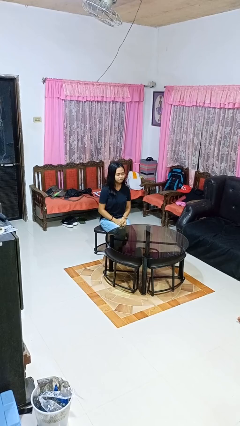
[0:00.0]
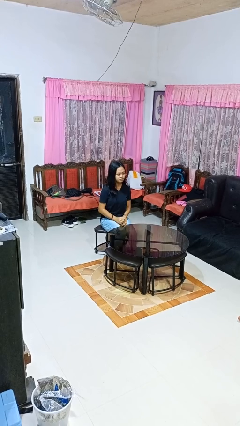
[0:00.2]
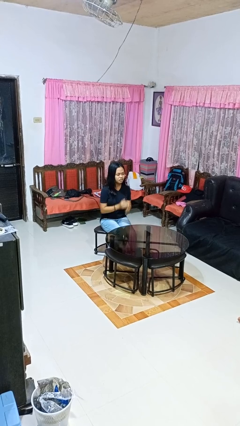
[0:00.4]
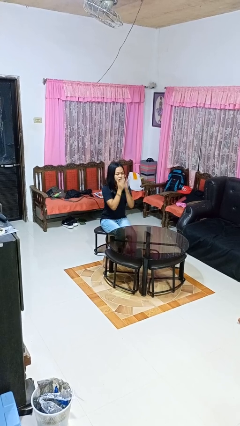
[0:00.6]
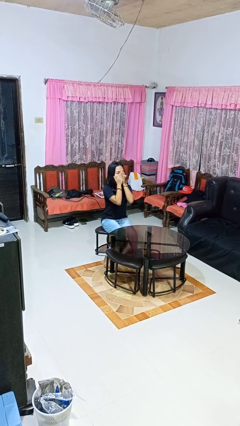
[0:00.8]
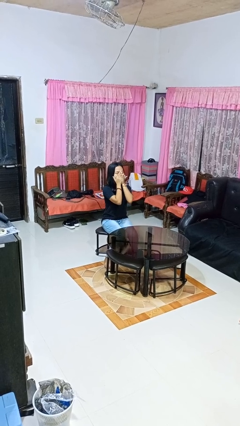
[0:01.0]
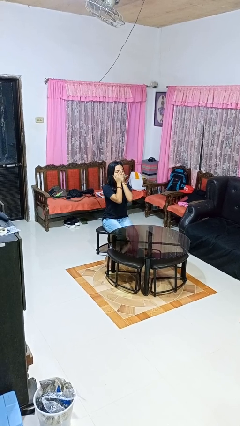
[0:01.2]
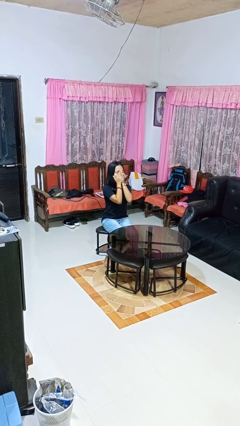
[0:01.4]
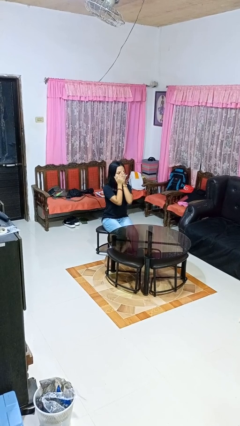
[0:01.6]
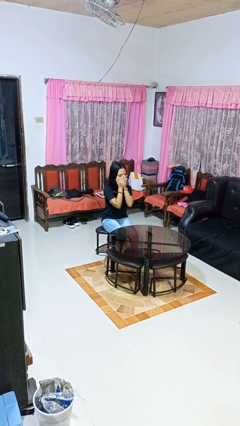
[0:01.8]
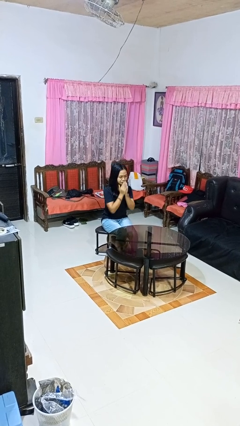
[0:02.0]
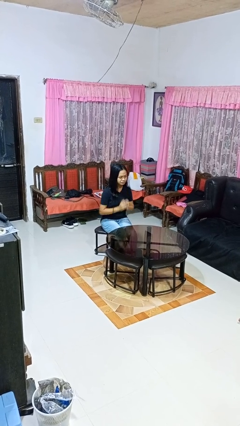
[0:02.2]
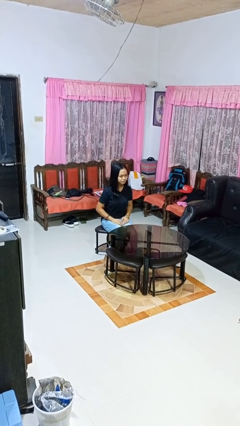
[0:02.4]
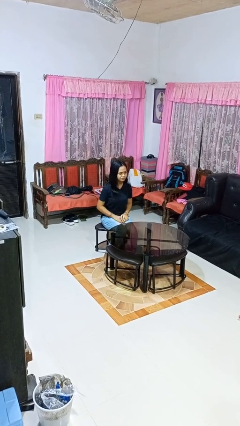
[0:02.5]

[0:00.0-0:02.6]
person yawns

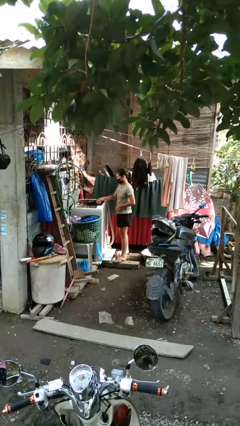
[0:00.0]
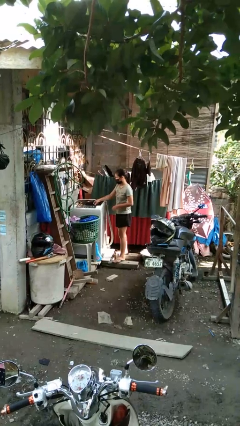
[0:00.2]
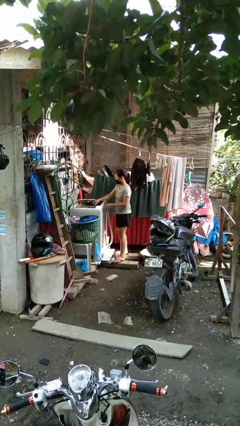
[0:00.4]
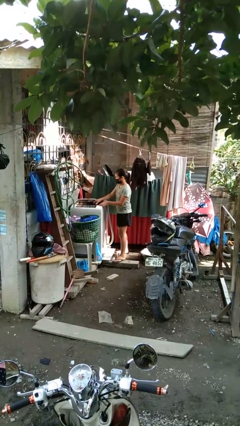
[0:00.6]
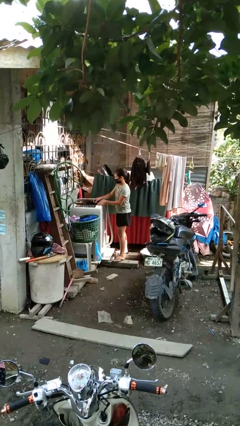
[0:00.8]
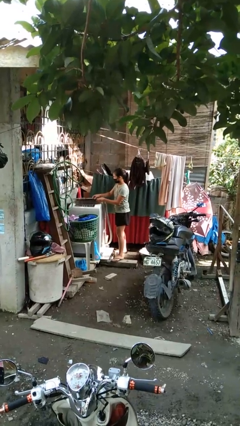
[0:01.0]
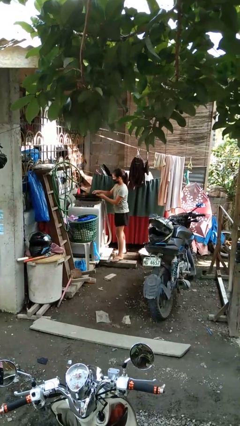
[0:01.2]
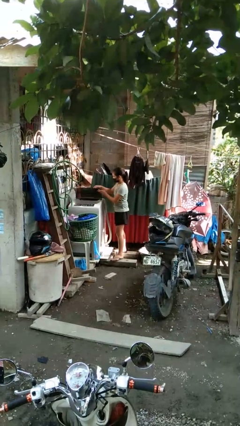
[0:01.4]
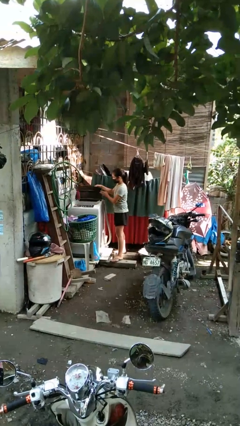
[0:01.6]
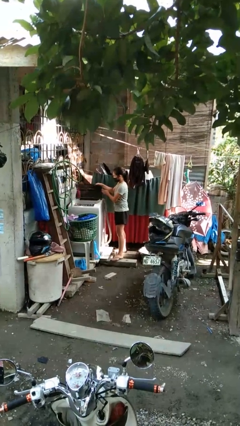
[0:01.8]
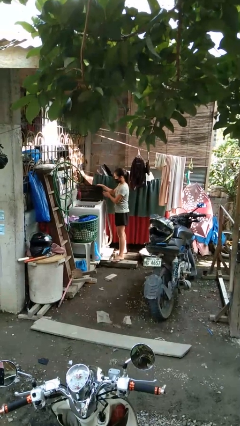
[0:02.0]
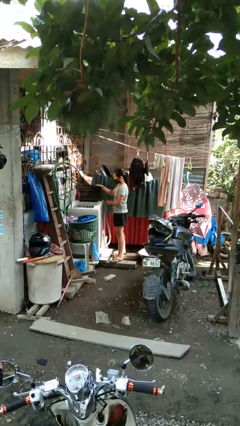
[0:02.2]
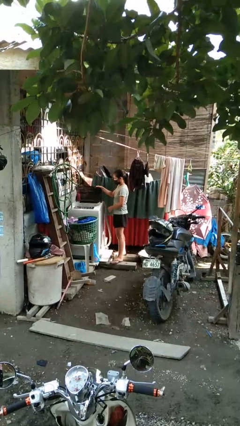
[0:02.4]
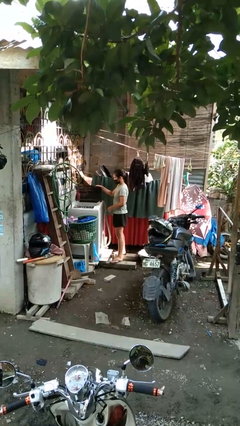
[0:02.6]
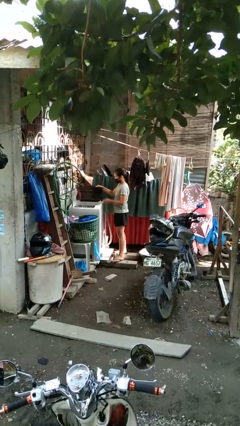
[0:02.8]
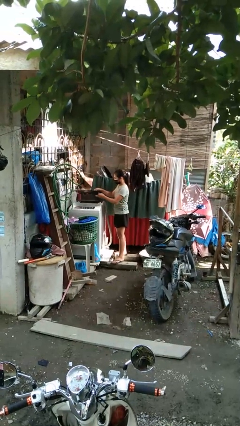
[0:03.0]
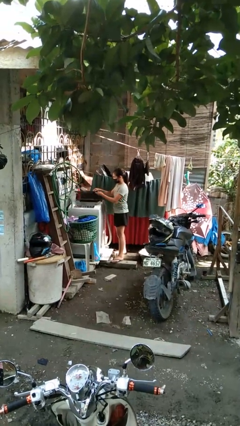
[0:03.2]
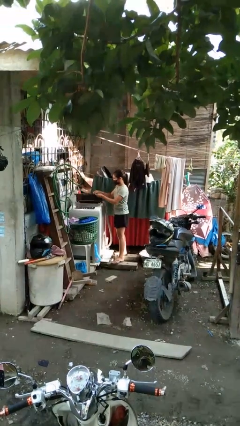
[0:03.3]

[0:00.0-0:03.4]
person opens clothes washer

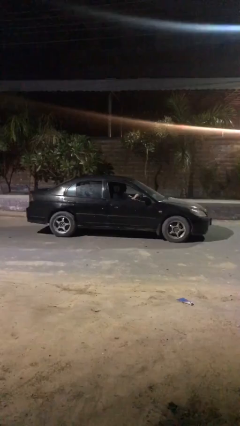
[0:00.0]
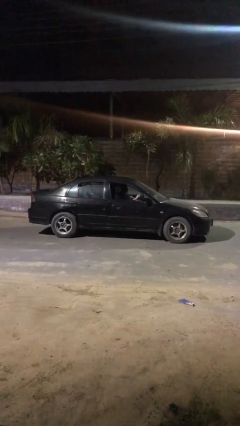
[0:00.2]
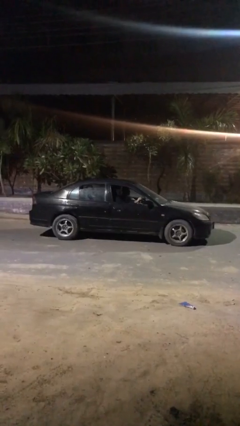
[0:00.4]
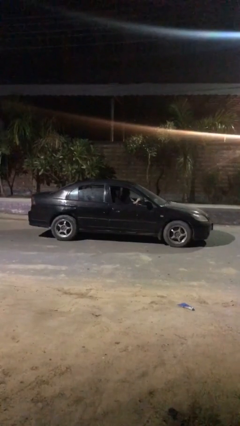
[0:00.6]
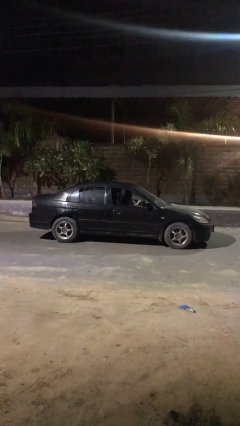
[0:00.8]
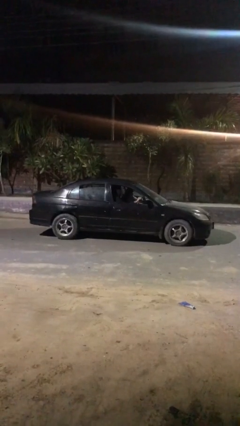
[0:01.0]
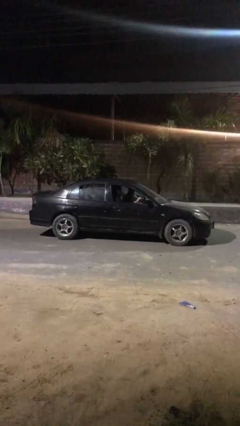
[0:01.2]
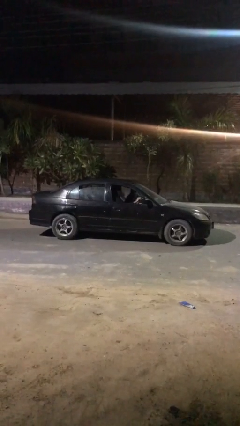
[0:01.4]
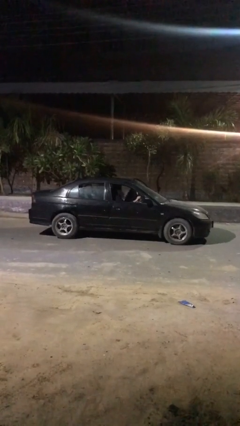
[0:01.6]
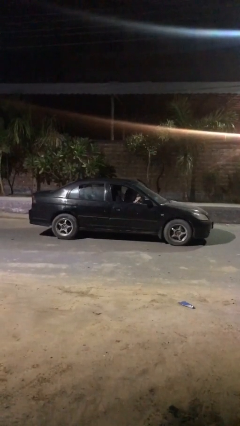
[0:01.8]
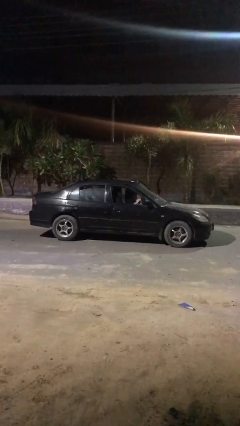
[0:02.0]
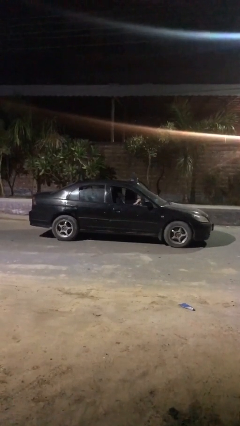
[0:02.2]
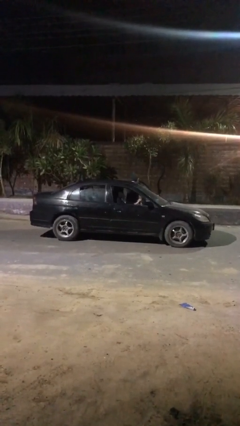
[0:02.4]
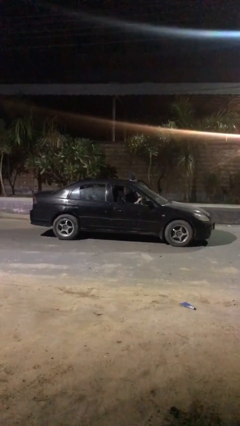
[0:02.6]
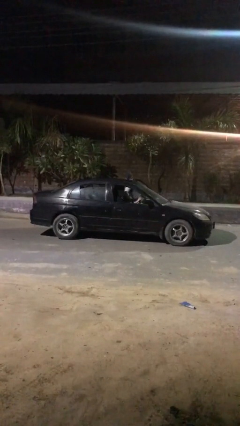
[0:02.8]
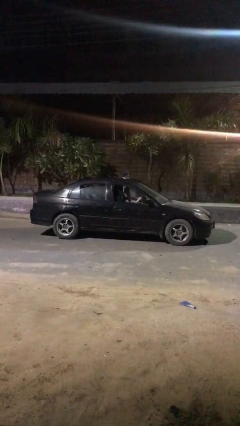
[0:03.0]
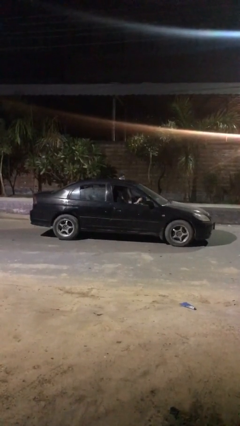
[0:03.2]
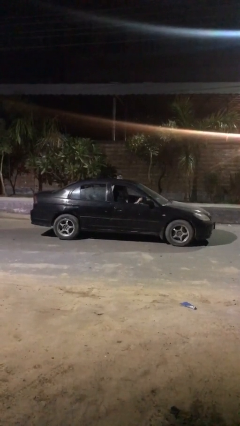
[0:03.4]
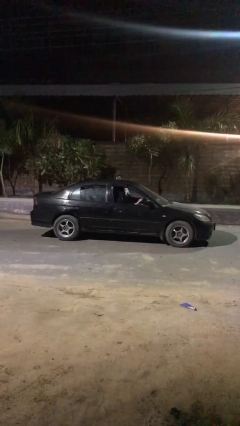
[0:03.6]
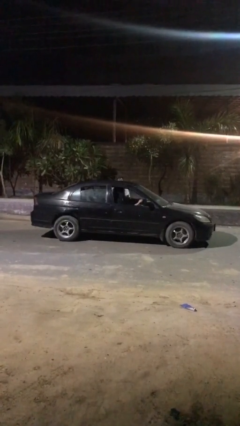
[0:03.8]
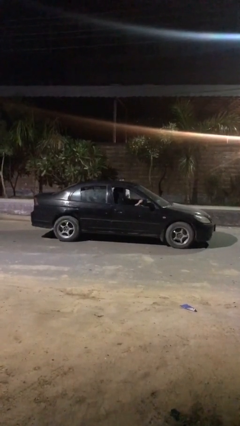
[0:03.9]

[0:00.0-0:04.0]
car drops off person

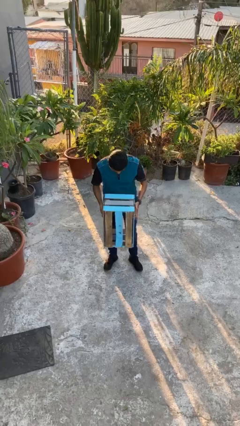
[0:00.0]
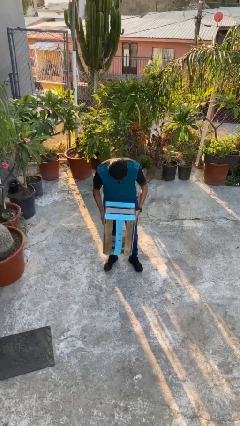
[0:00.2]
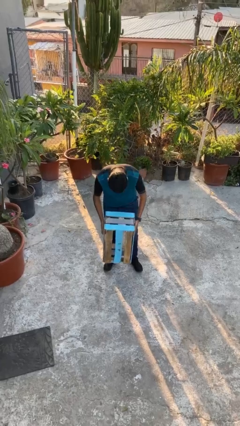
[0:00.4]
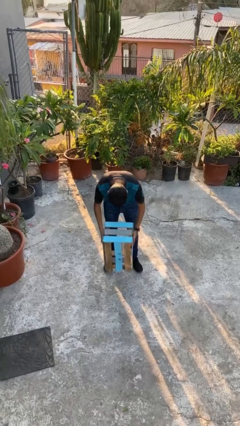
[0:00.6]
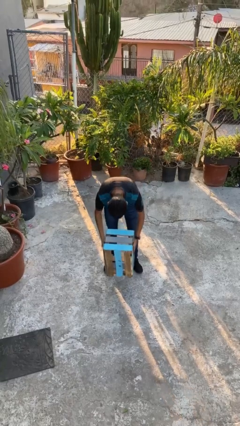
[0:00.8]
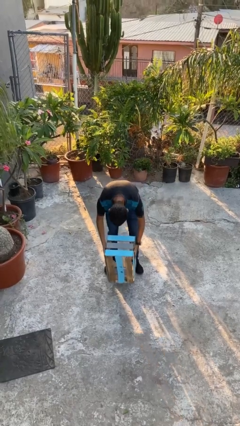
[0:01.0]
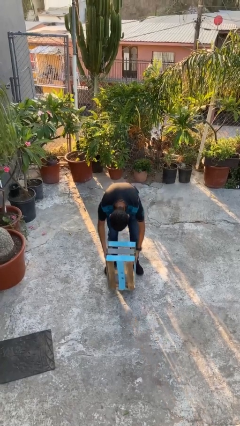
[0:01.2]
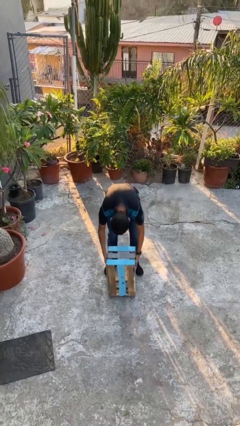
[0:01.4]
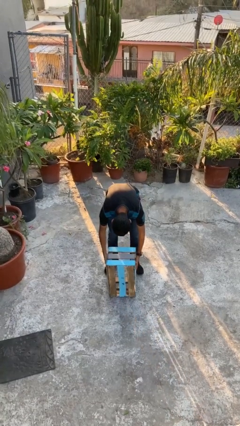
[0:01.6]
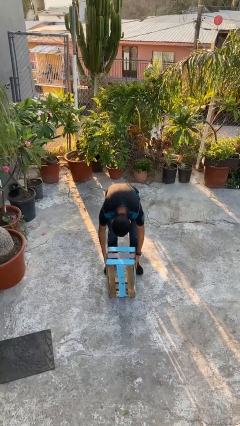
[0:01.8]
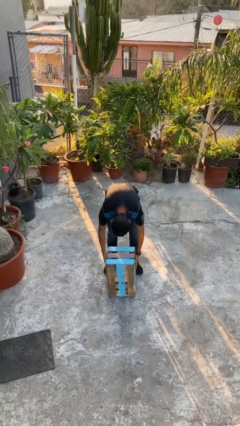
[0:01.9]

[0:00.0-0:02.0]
person puts down object on floor

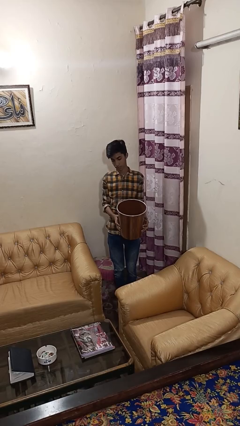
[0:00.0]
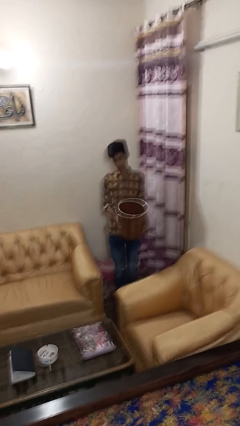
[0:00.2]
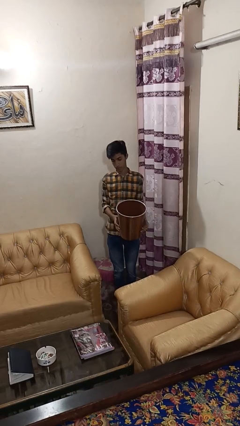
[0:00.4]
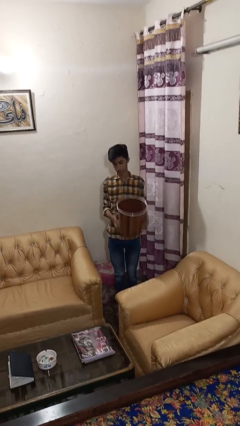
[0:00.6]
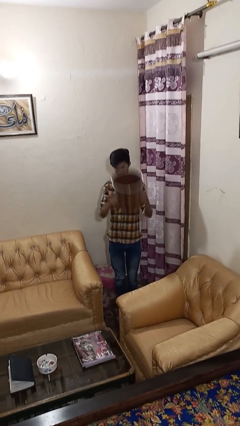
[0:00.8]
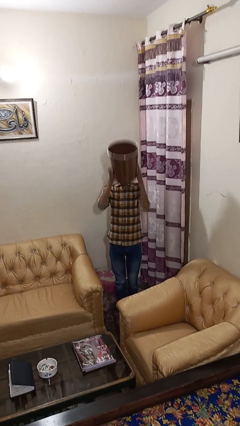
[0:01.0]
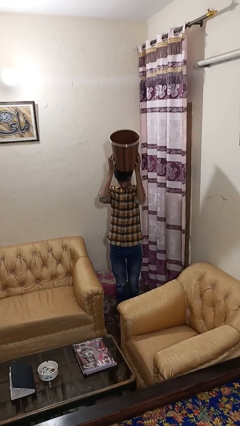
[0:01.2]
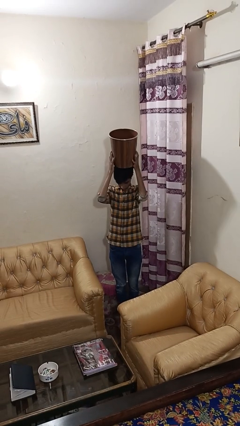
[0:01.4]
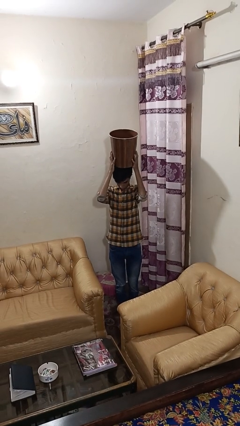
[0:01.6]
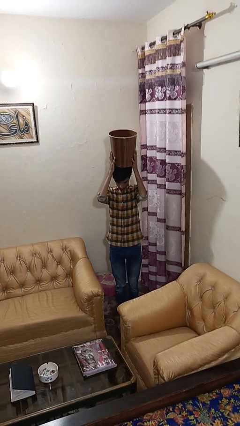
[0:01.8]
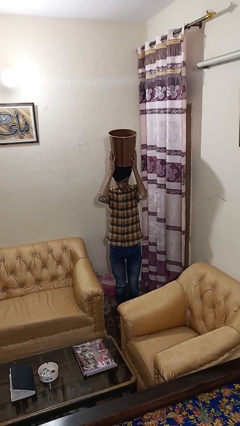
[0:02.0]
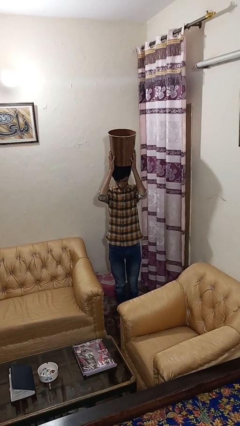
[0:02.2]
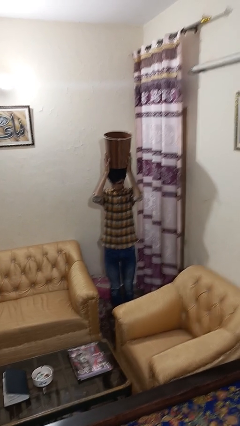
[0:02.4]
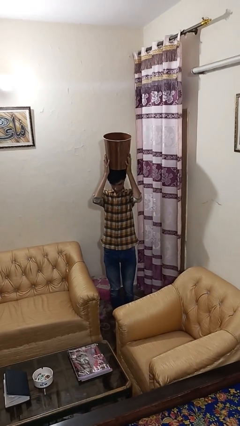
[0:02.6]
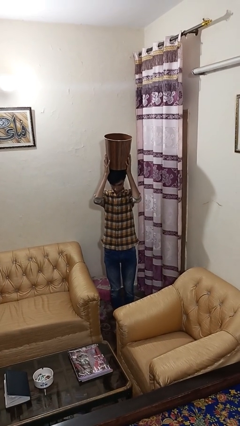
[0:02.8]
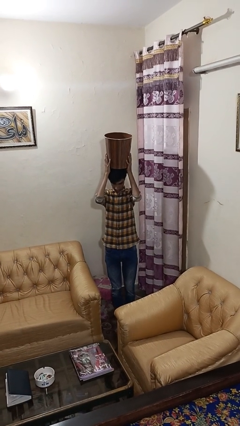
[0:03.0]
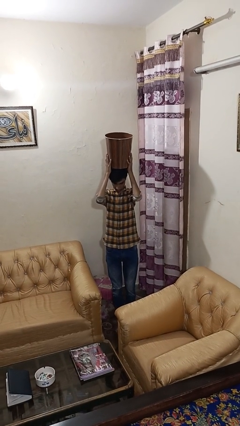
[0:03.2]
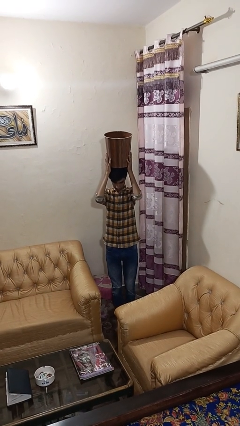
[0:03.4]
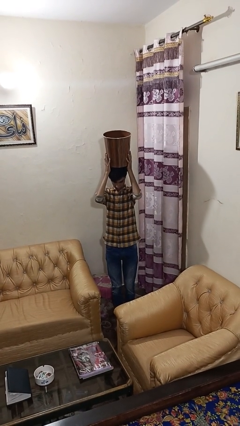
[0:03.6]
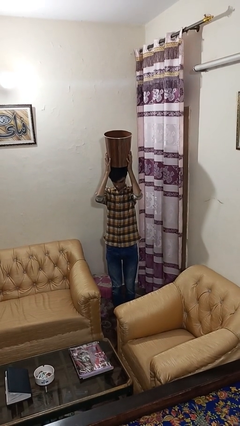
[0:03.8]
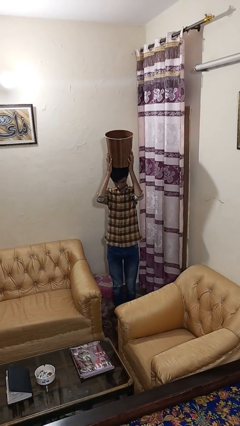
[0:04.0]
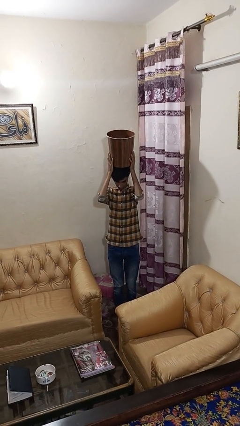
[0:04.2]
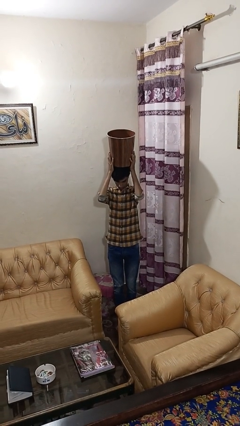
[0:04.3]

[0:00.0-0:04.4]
person holds object above head

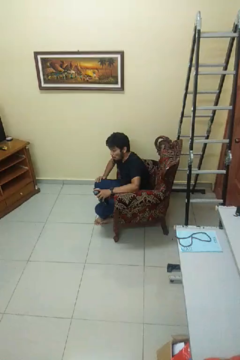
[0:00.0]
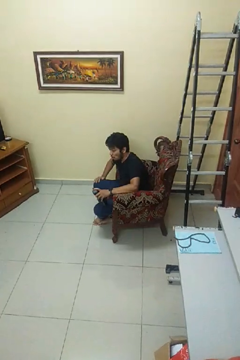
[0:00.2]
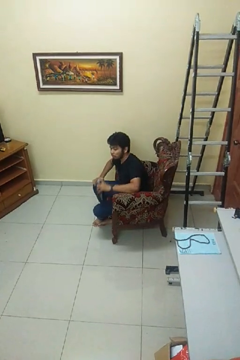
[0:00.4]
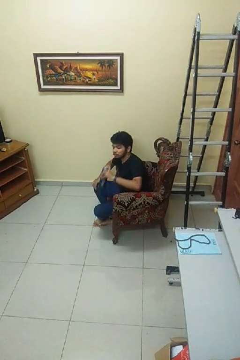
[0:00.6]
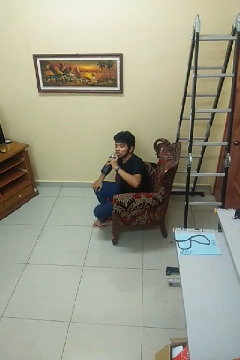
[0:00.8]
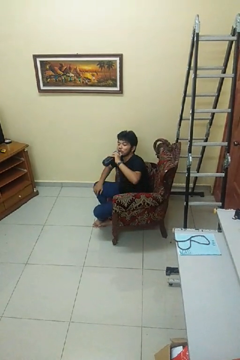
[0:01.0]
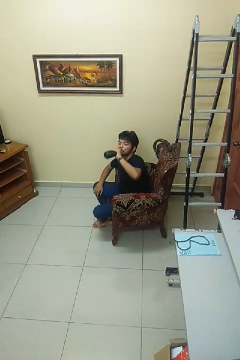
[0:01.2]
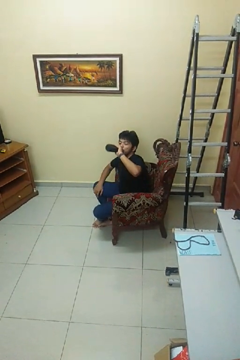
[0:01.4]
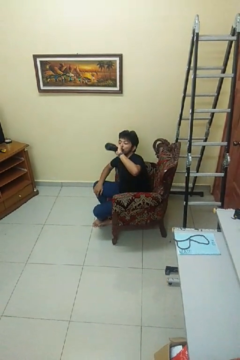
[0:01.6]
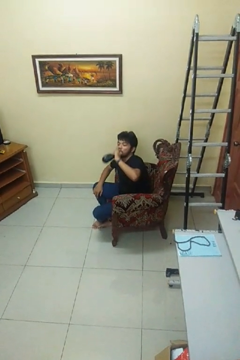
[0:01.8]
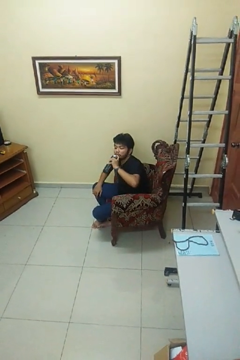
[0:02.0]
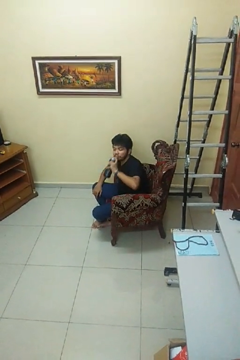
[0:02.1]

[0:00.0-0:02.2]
person drinks from bottle
